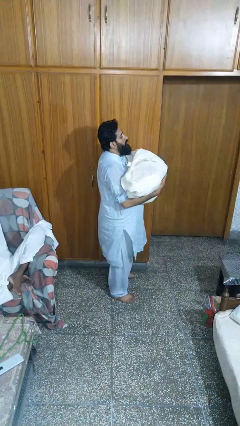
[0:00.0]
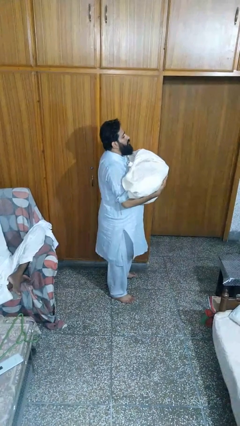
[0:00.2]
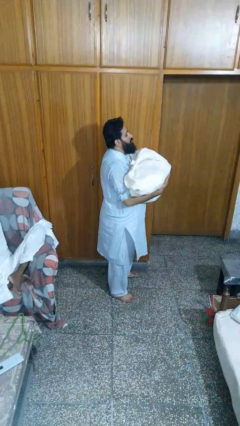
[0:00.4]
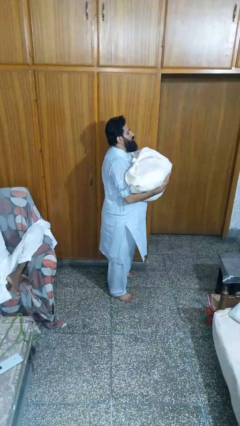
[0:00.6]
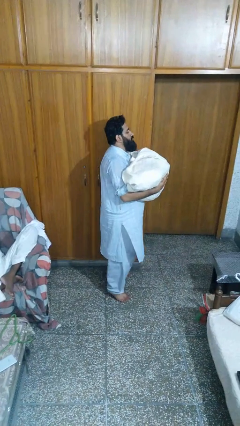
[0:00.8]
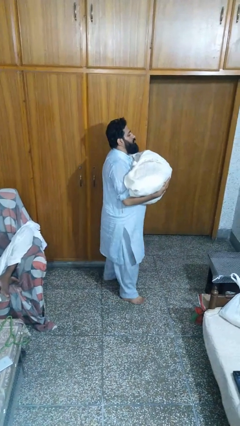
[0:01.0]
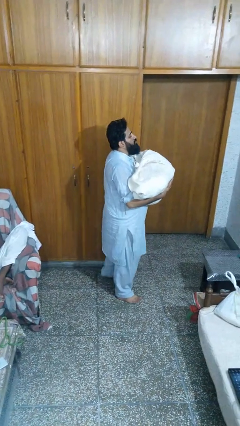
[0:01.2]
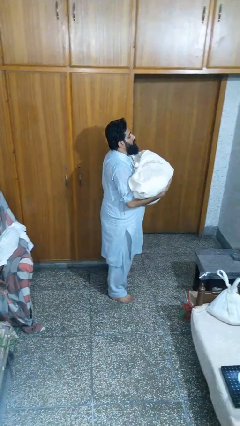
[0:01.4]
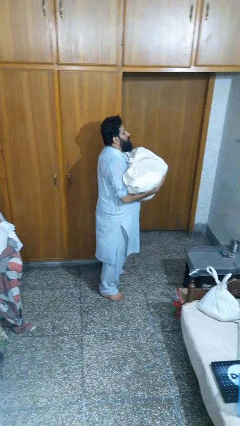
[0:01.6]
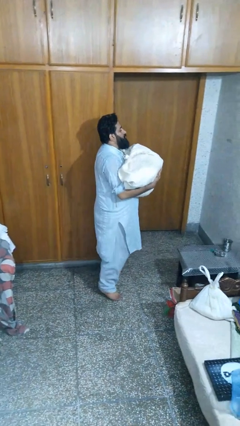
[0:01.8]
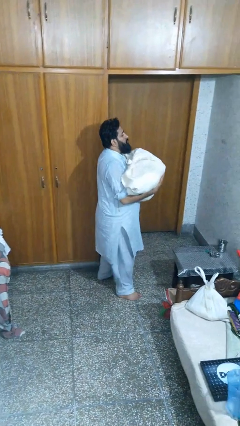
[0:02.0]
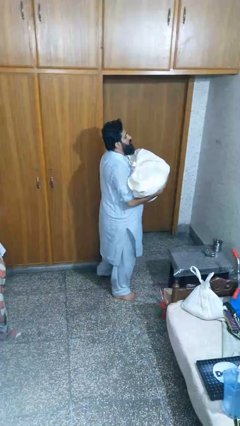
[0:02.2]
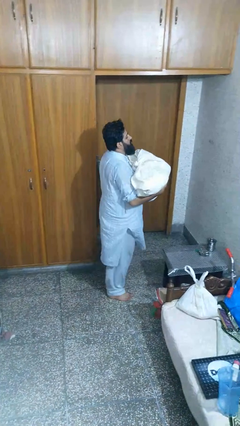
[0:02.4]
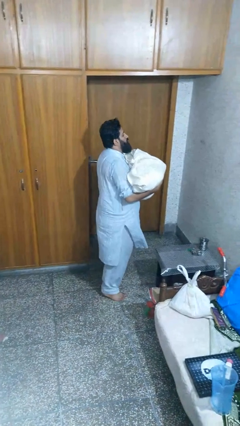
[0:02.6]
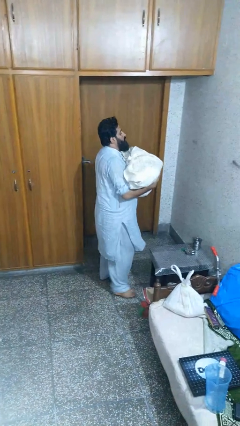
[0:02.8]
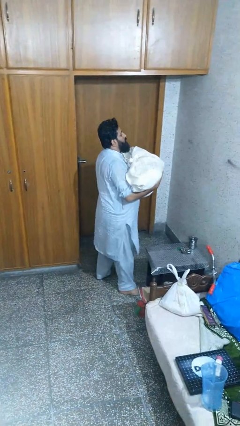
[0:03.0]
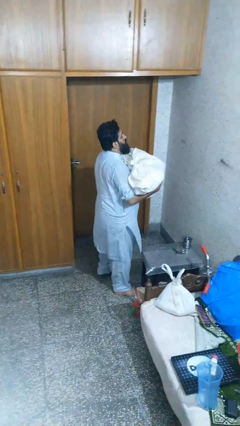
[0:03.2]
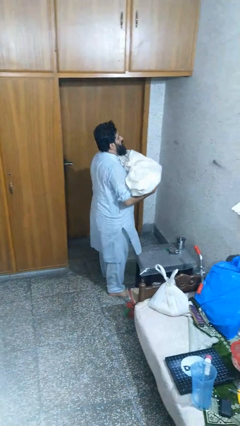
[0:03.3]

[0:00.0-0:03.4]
person carries laundry basket

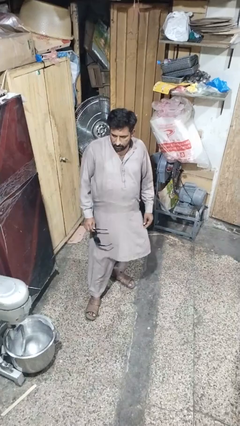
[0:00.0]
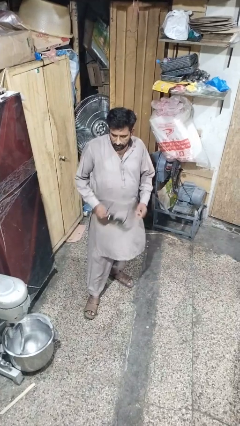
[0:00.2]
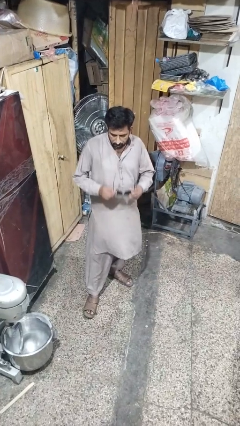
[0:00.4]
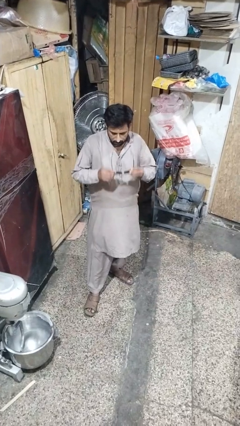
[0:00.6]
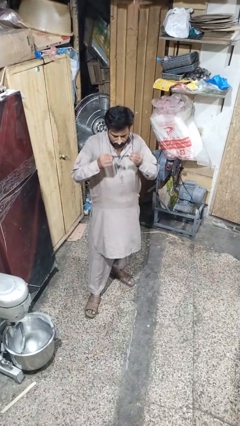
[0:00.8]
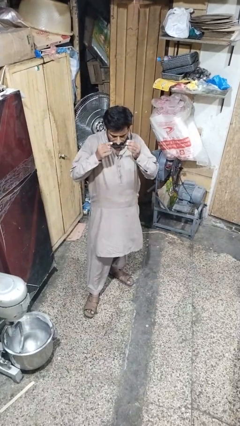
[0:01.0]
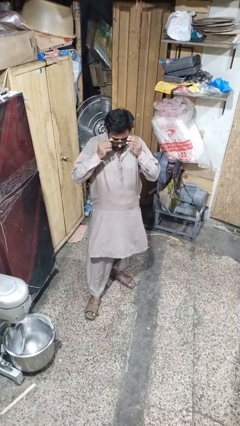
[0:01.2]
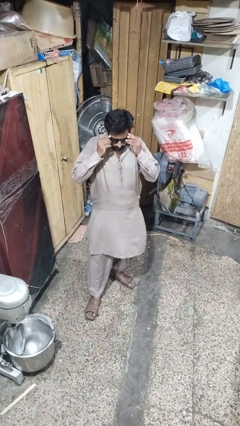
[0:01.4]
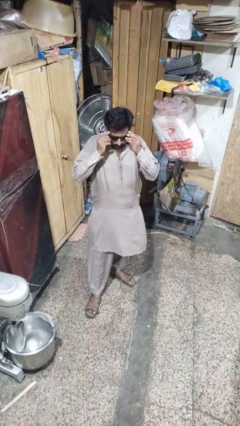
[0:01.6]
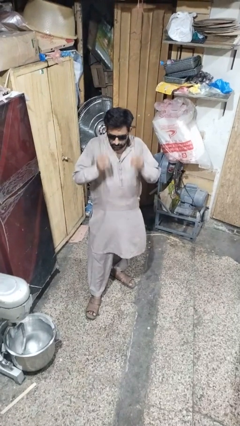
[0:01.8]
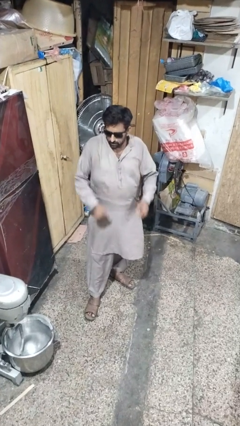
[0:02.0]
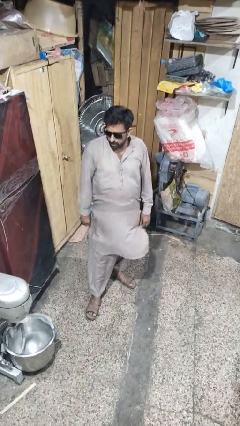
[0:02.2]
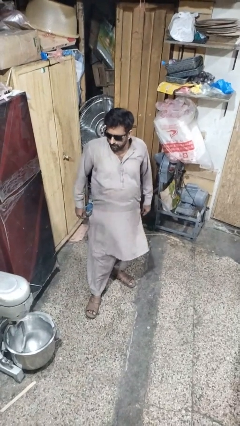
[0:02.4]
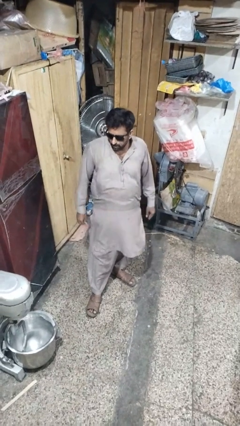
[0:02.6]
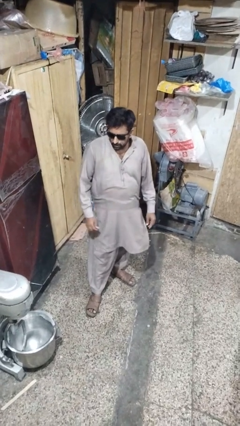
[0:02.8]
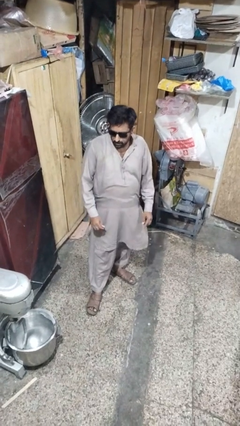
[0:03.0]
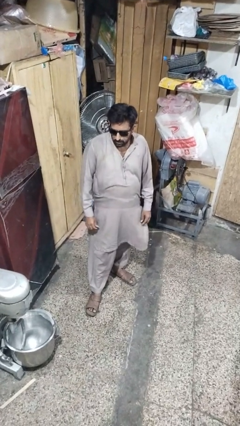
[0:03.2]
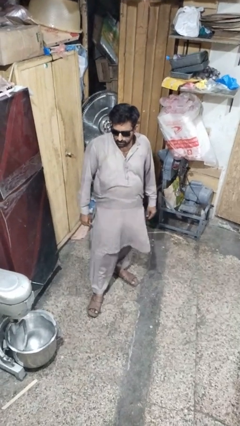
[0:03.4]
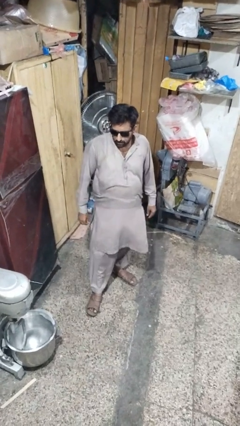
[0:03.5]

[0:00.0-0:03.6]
person puts on sunglasses

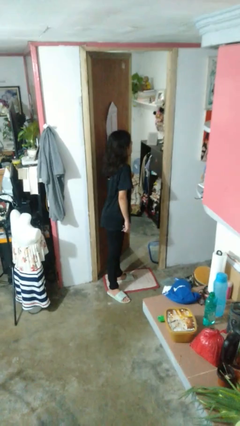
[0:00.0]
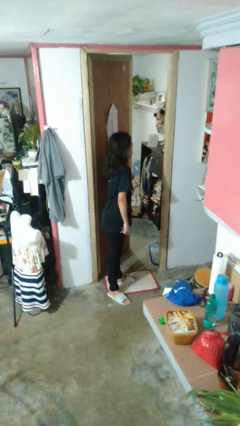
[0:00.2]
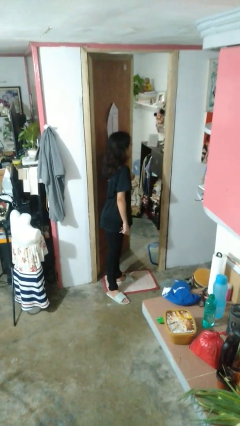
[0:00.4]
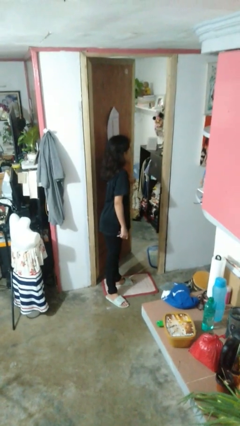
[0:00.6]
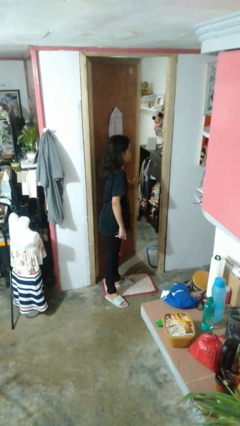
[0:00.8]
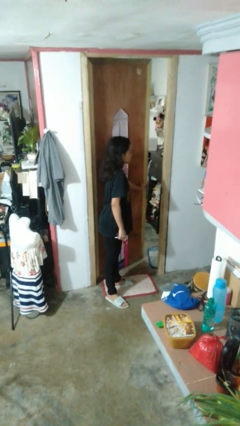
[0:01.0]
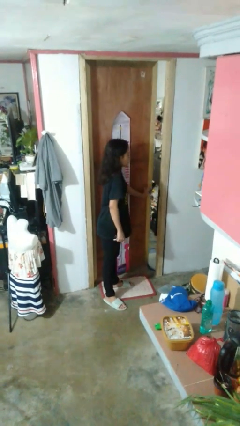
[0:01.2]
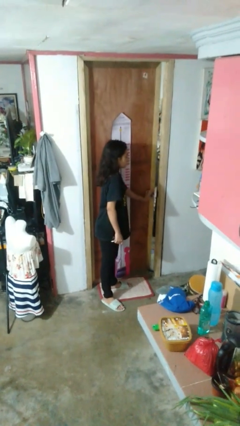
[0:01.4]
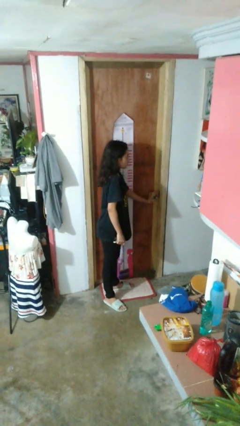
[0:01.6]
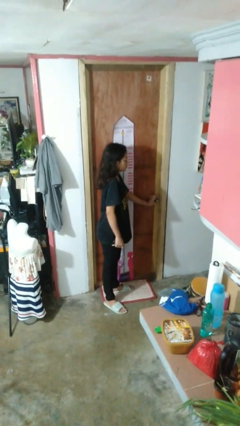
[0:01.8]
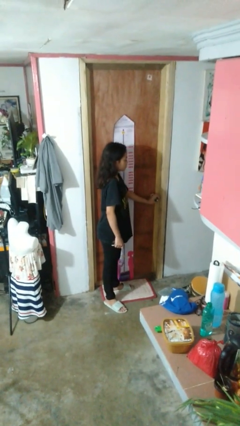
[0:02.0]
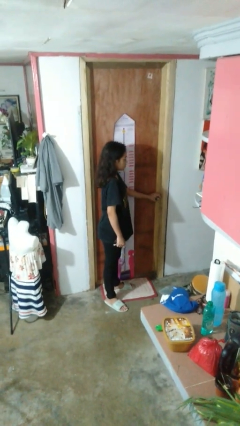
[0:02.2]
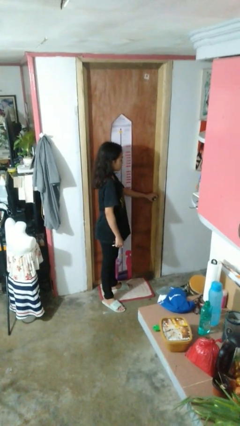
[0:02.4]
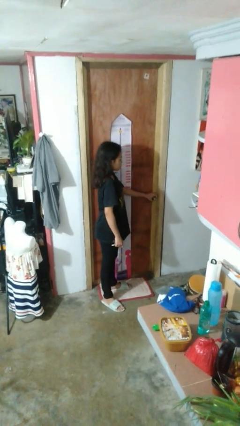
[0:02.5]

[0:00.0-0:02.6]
person closes facility door

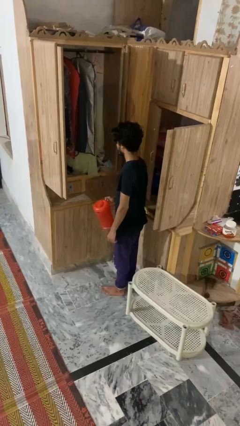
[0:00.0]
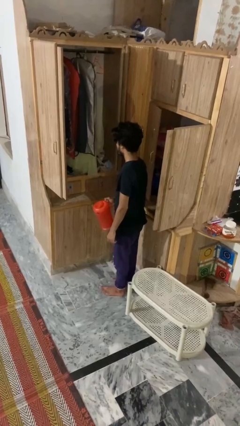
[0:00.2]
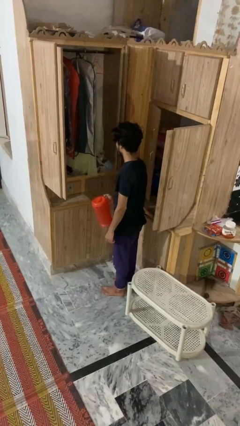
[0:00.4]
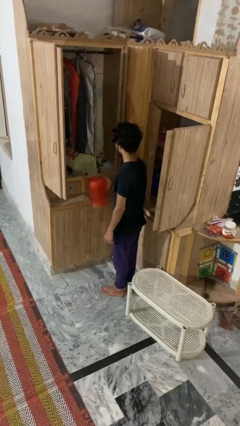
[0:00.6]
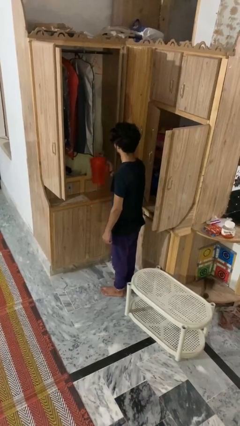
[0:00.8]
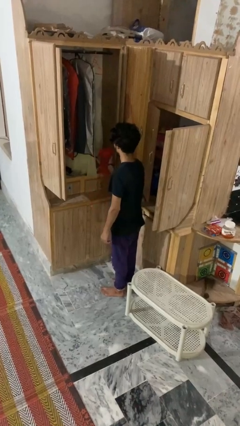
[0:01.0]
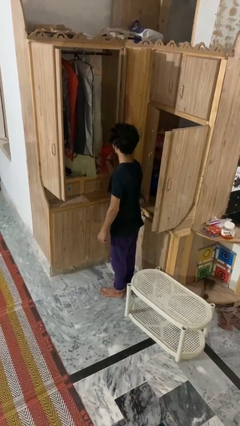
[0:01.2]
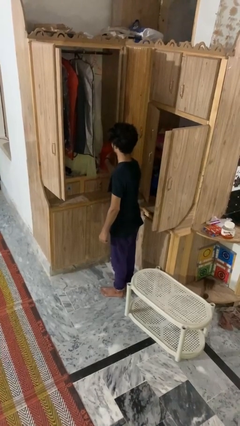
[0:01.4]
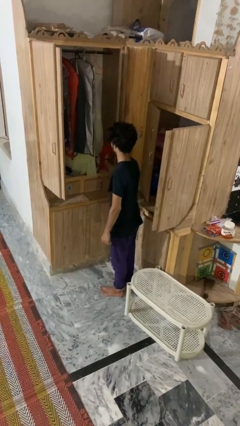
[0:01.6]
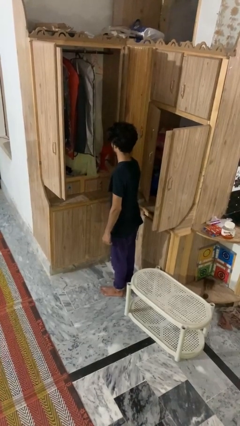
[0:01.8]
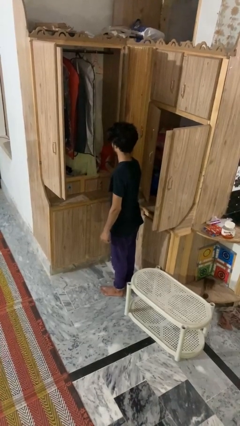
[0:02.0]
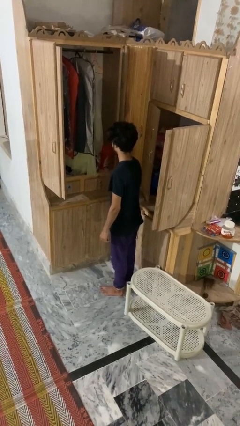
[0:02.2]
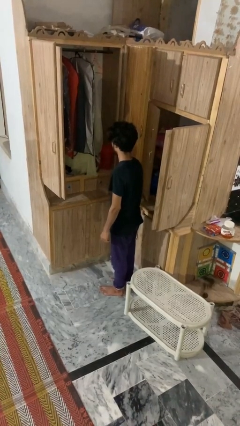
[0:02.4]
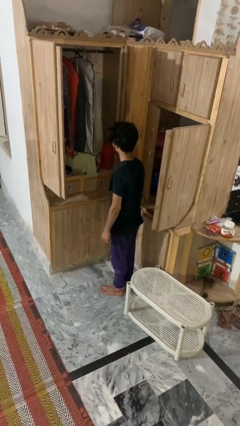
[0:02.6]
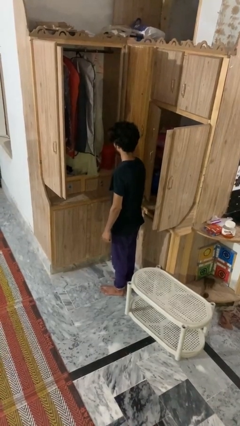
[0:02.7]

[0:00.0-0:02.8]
person puts down object into cabinet

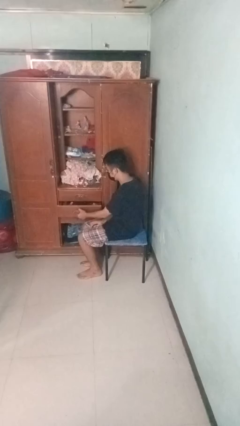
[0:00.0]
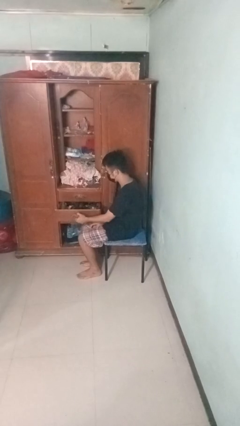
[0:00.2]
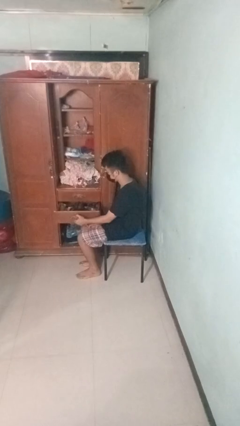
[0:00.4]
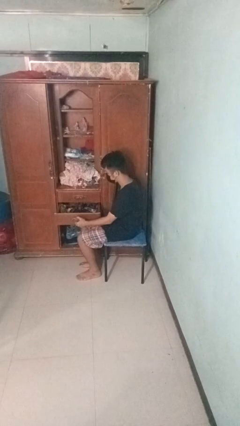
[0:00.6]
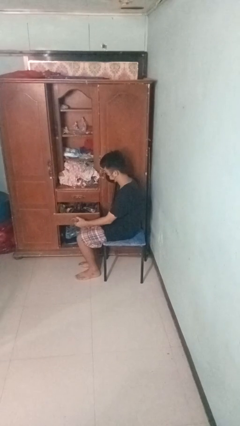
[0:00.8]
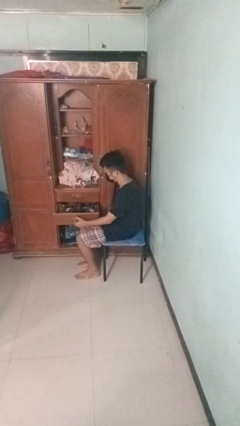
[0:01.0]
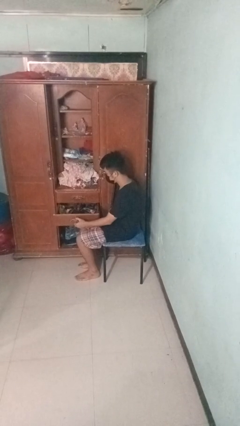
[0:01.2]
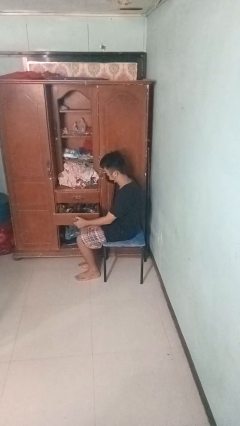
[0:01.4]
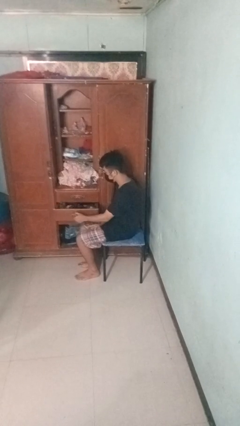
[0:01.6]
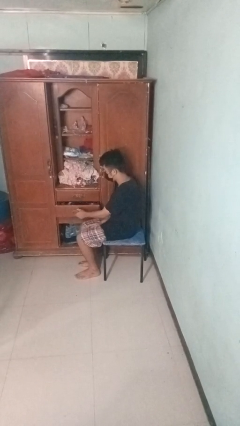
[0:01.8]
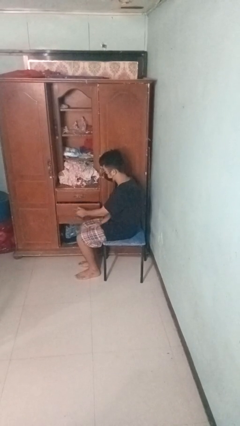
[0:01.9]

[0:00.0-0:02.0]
person opens dresser drawer

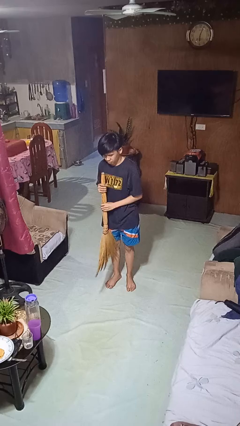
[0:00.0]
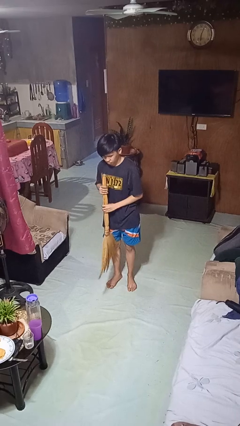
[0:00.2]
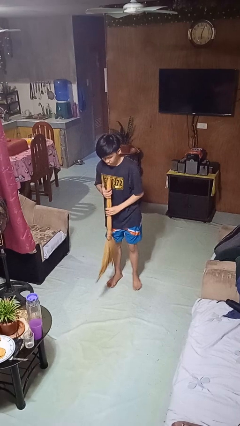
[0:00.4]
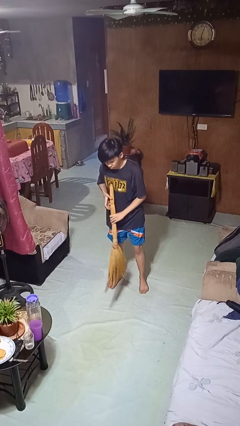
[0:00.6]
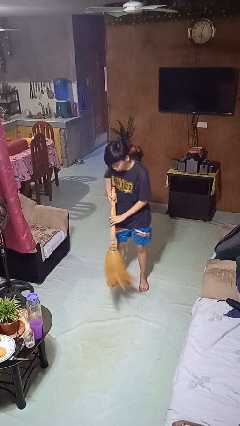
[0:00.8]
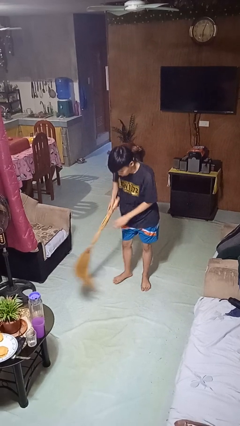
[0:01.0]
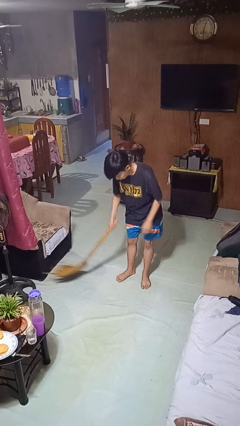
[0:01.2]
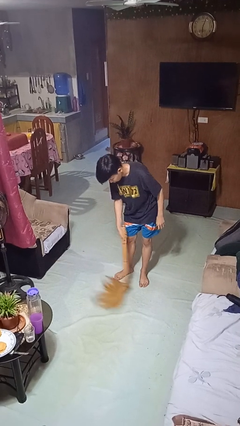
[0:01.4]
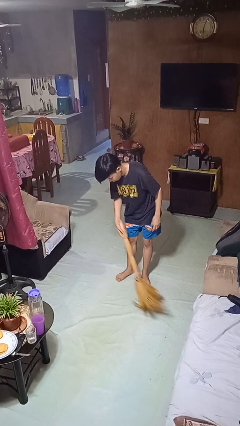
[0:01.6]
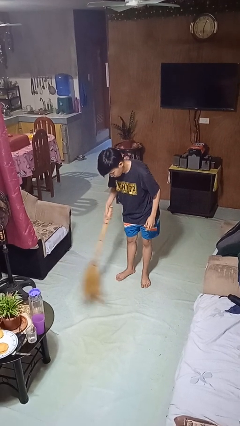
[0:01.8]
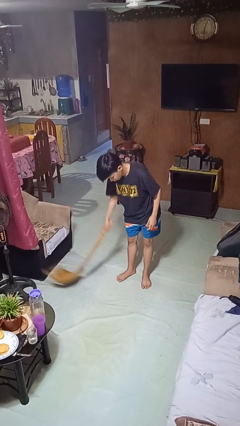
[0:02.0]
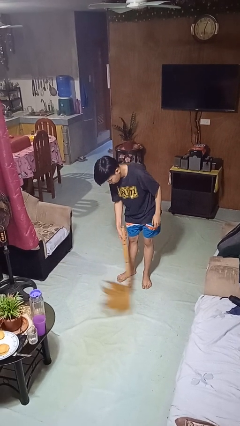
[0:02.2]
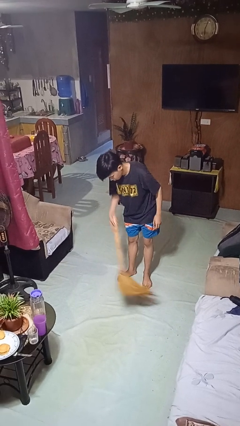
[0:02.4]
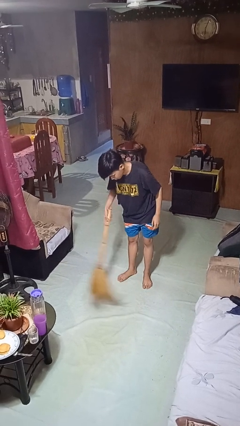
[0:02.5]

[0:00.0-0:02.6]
person sweeps floor

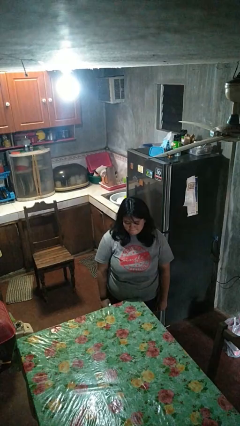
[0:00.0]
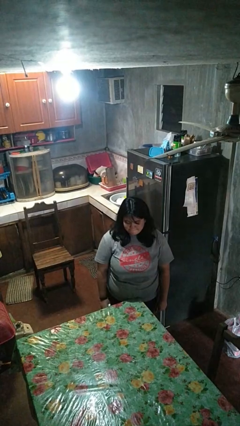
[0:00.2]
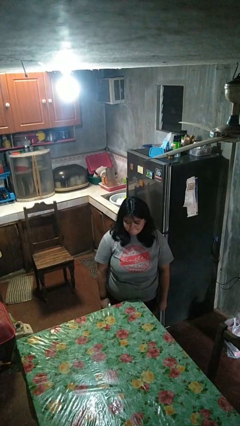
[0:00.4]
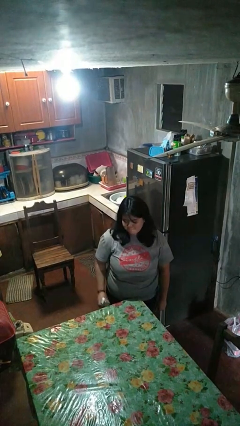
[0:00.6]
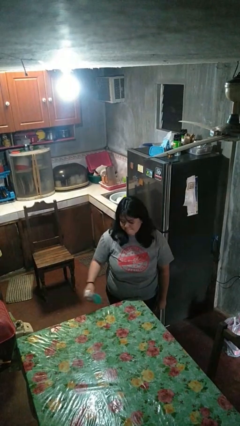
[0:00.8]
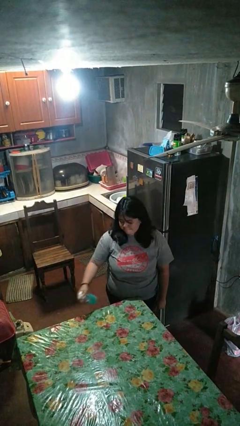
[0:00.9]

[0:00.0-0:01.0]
person sprays from bottle
